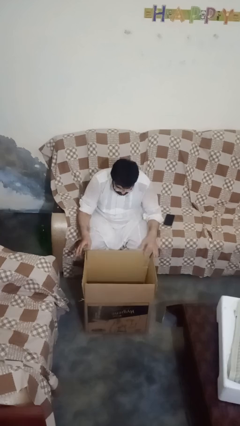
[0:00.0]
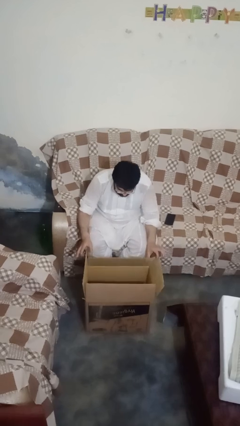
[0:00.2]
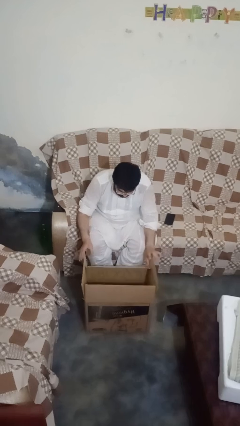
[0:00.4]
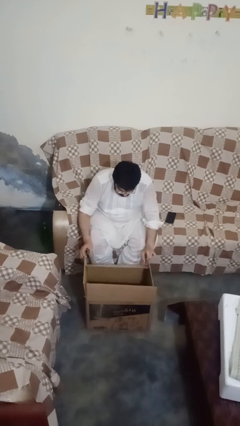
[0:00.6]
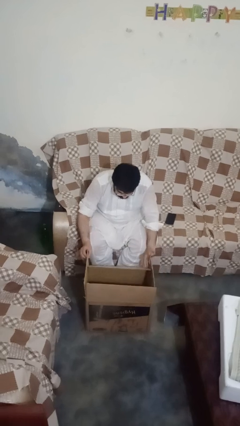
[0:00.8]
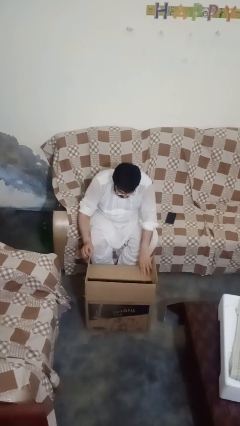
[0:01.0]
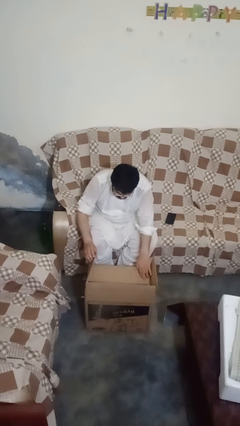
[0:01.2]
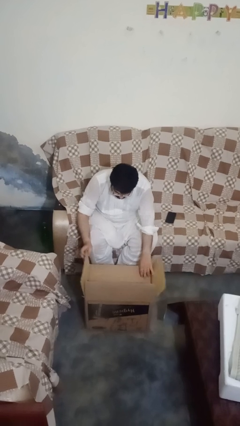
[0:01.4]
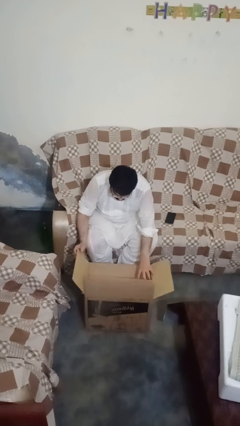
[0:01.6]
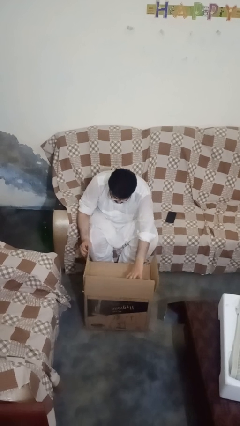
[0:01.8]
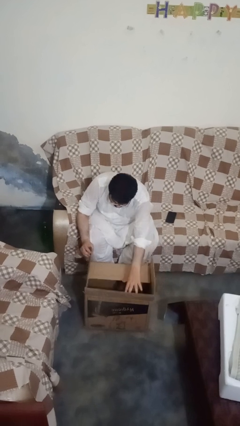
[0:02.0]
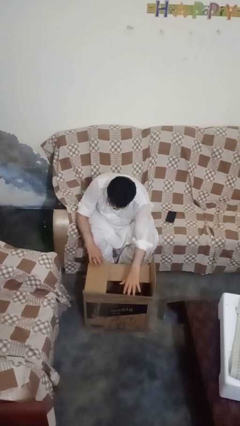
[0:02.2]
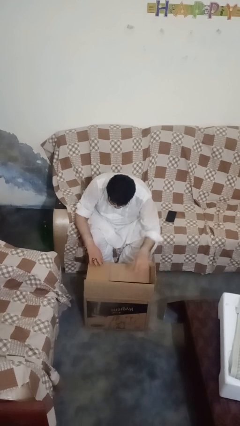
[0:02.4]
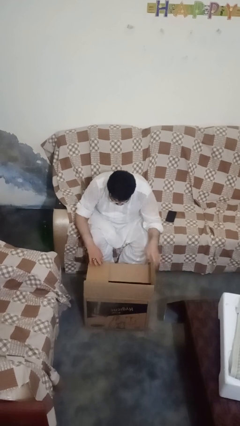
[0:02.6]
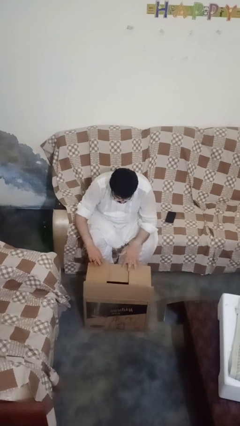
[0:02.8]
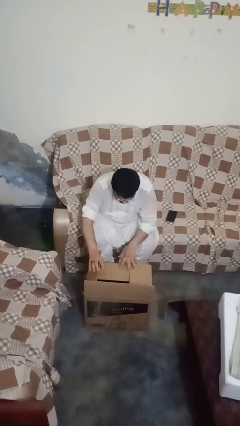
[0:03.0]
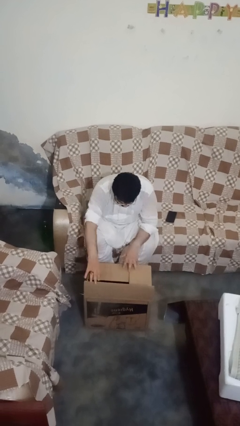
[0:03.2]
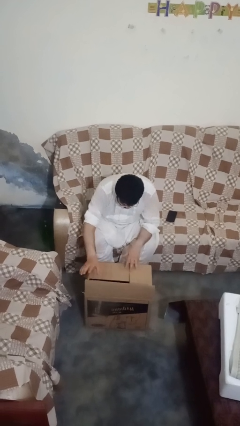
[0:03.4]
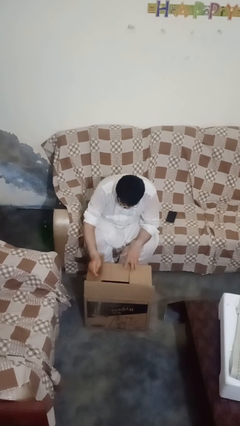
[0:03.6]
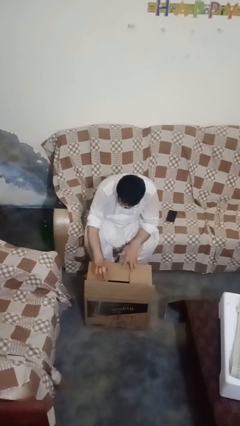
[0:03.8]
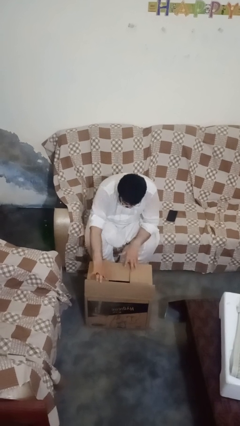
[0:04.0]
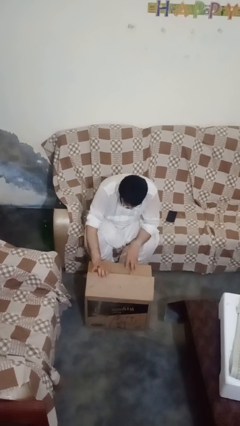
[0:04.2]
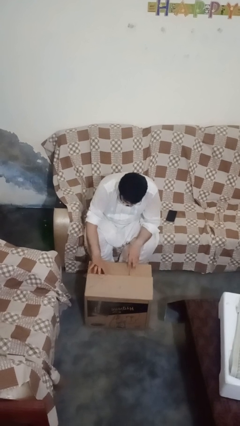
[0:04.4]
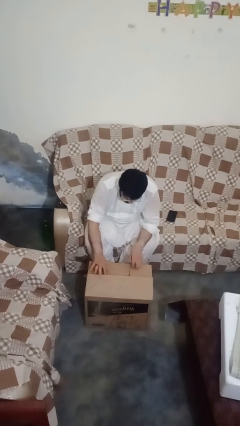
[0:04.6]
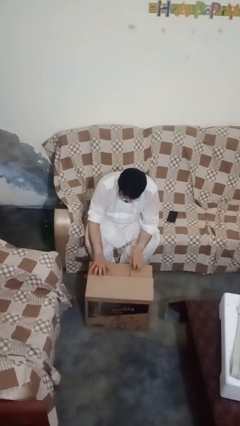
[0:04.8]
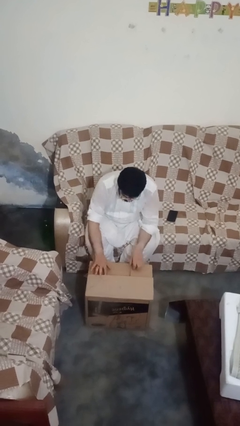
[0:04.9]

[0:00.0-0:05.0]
person closes box

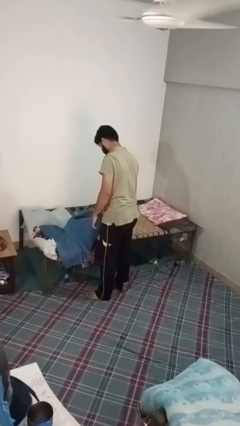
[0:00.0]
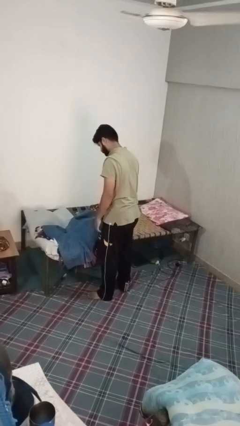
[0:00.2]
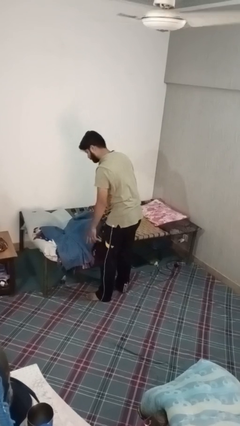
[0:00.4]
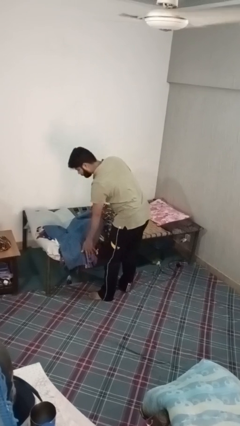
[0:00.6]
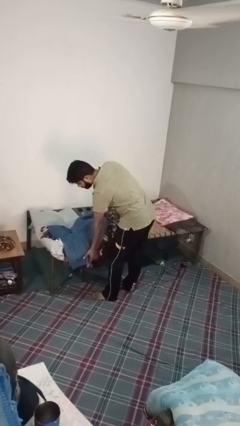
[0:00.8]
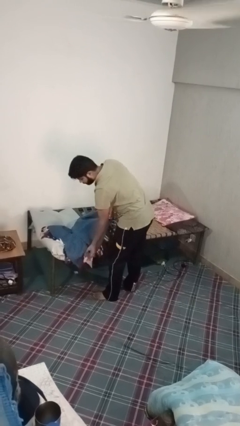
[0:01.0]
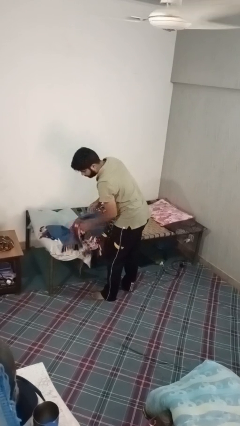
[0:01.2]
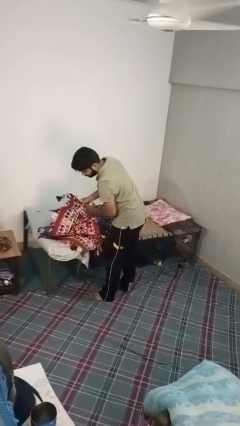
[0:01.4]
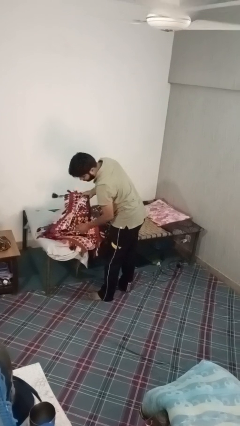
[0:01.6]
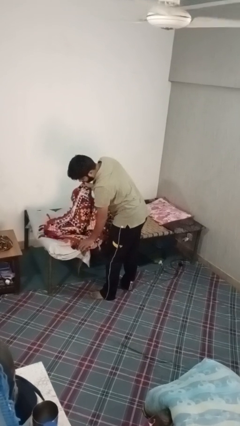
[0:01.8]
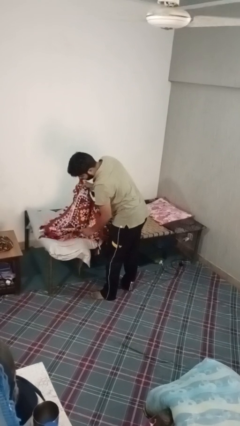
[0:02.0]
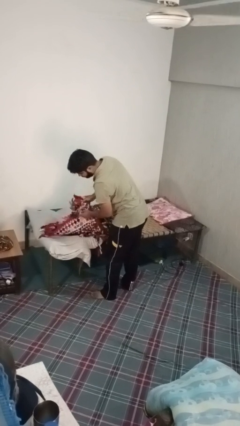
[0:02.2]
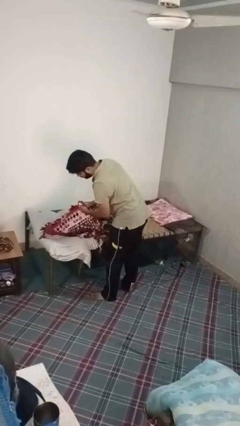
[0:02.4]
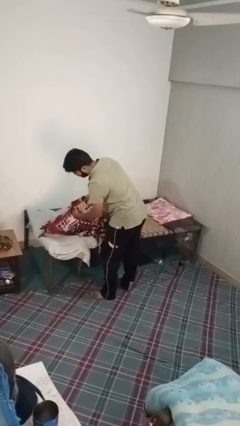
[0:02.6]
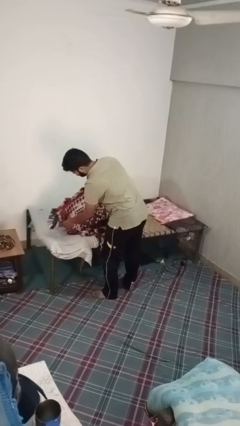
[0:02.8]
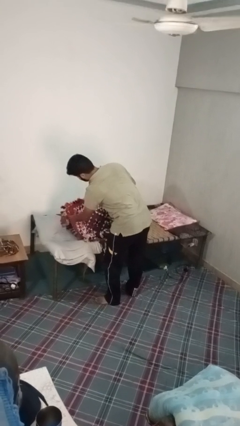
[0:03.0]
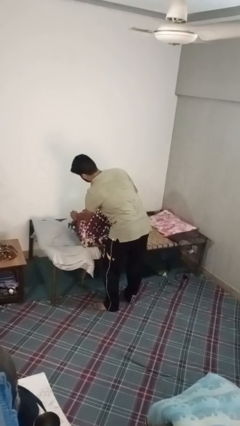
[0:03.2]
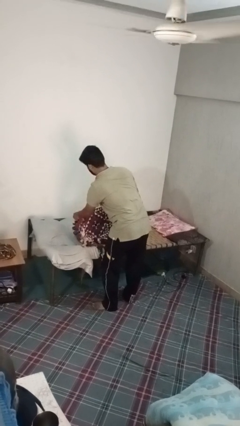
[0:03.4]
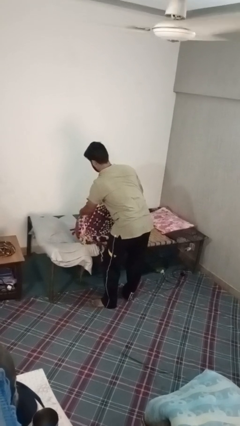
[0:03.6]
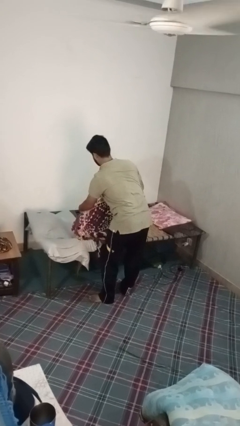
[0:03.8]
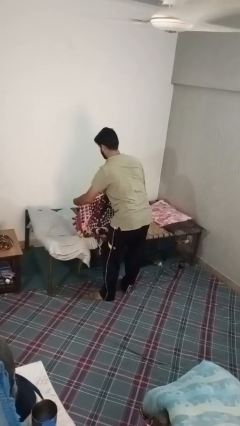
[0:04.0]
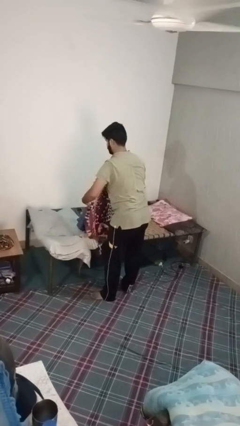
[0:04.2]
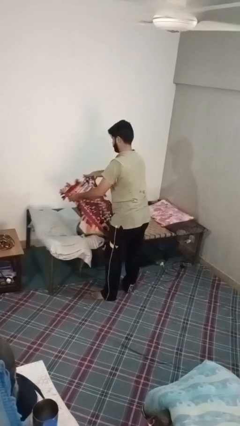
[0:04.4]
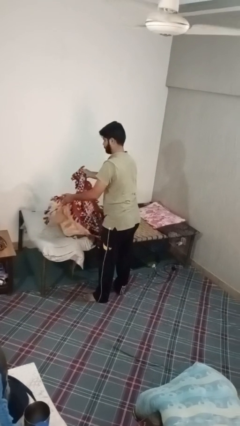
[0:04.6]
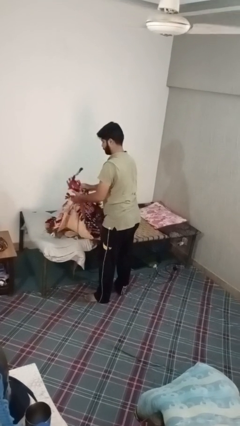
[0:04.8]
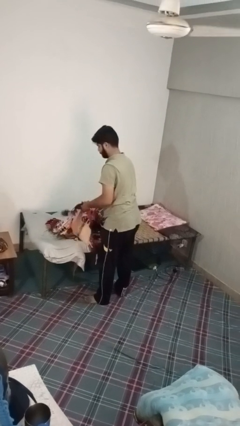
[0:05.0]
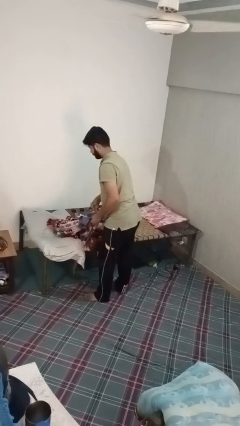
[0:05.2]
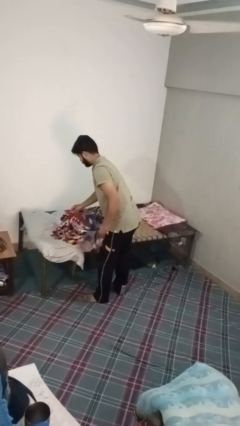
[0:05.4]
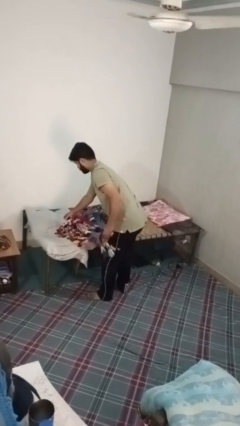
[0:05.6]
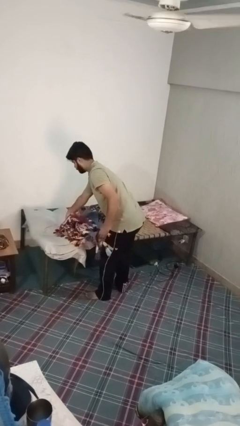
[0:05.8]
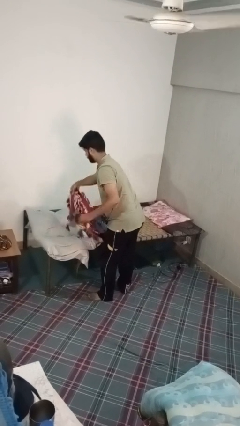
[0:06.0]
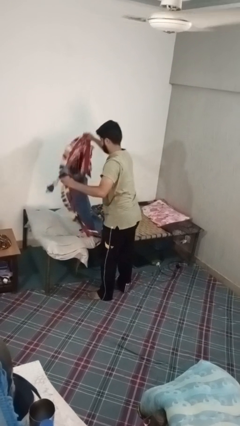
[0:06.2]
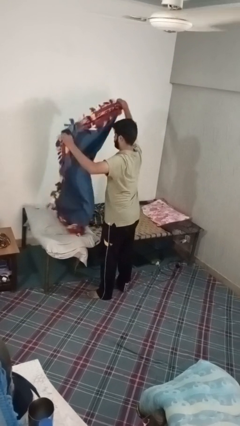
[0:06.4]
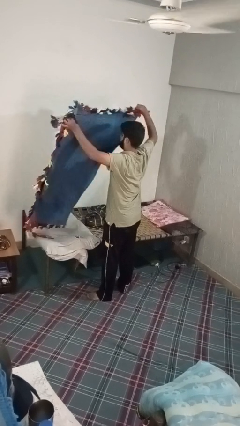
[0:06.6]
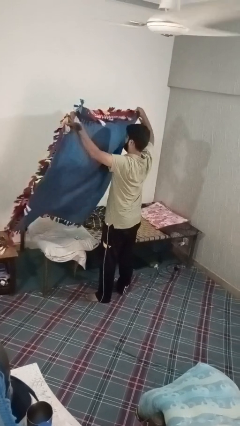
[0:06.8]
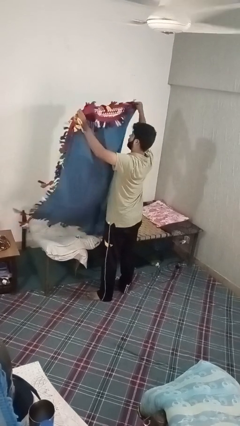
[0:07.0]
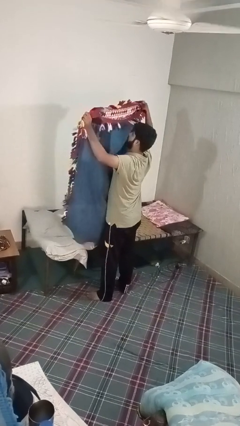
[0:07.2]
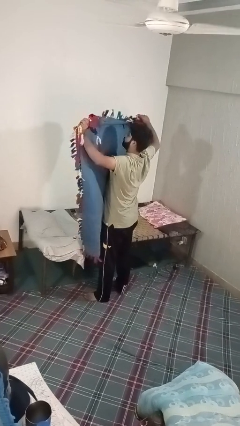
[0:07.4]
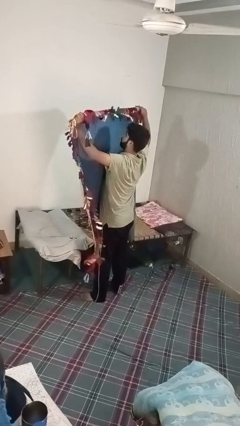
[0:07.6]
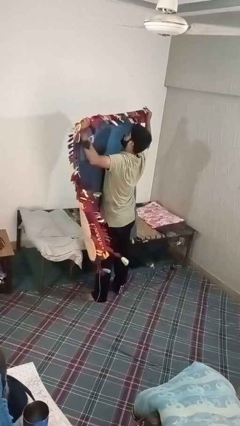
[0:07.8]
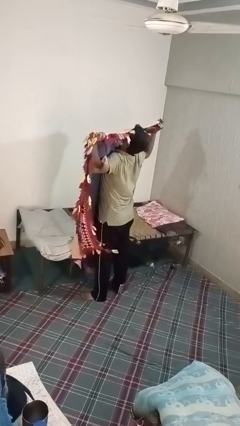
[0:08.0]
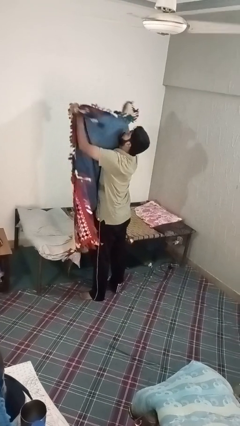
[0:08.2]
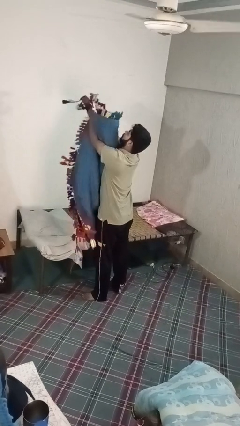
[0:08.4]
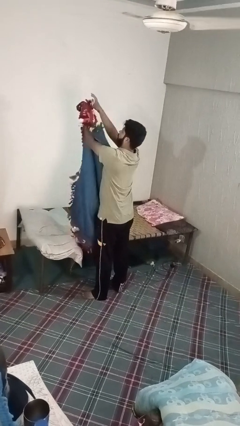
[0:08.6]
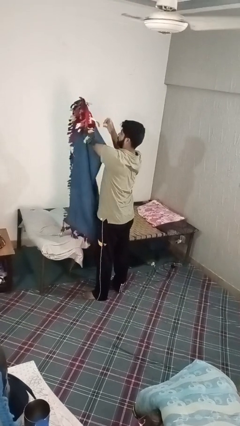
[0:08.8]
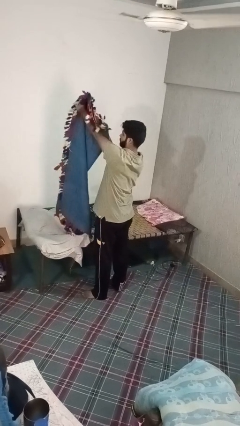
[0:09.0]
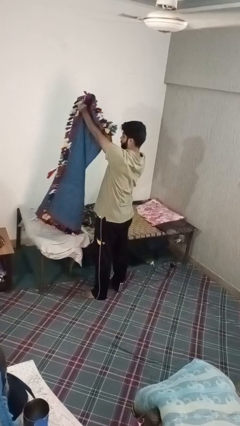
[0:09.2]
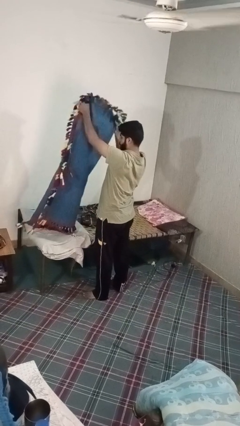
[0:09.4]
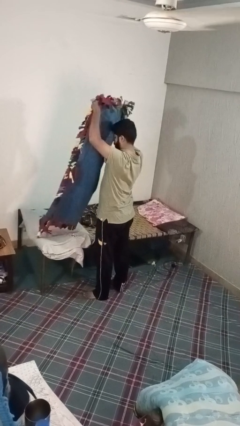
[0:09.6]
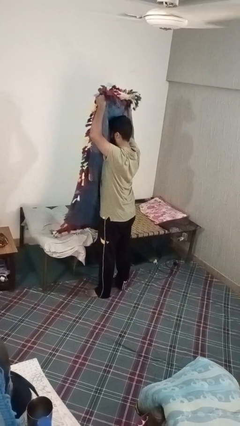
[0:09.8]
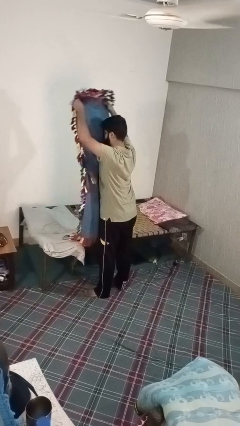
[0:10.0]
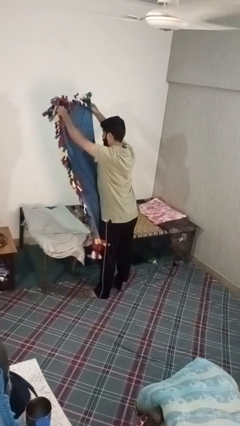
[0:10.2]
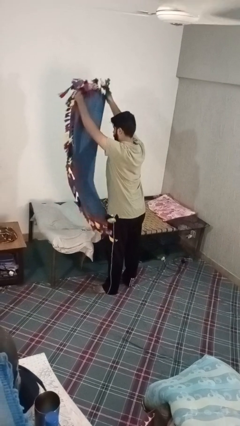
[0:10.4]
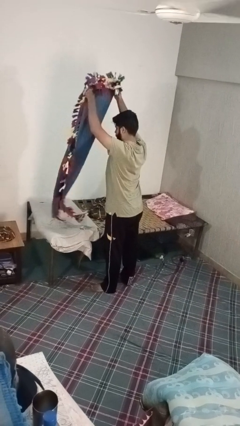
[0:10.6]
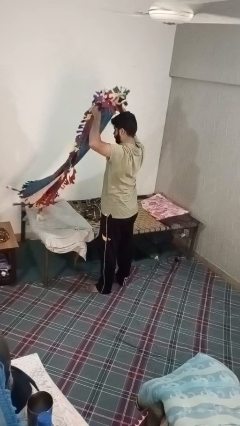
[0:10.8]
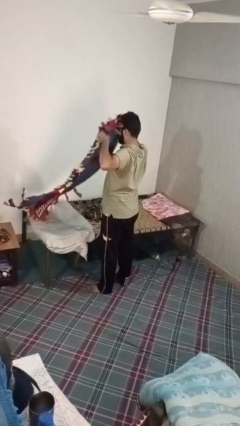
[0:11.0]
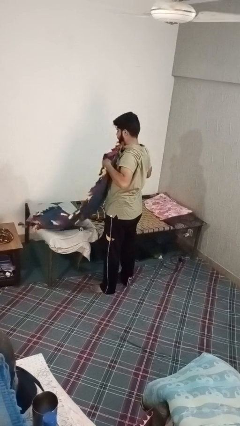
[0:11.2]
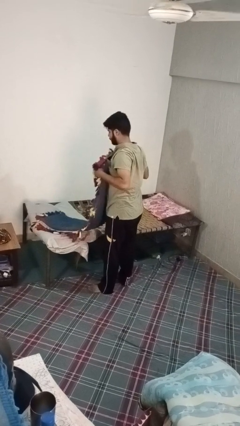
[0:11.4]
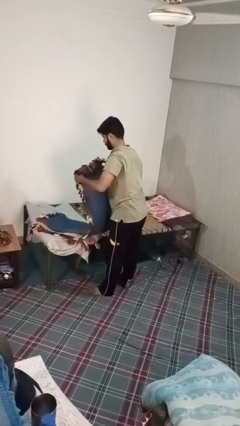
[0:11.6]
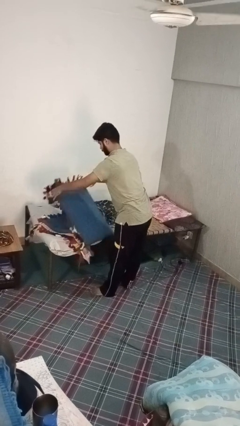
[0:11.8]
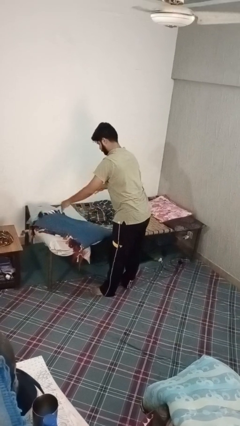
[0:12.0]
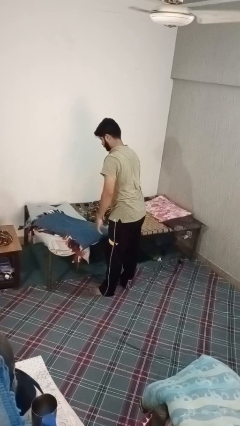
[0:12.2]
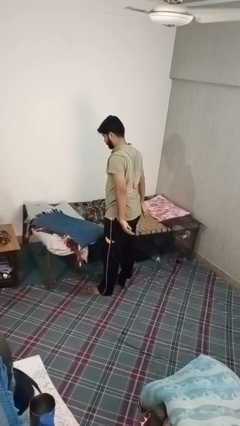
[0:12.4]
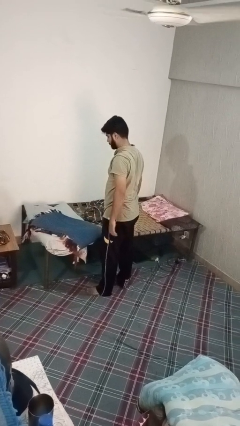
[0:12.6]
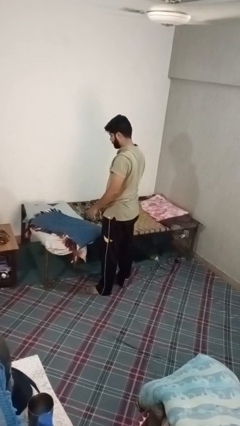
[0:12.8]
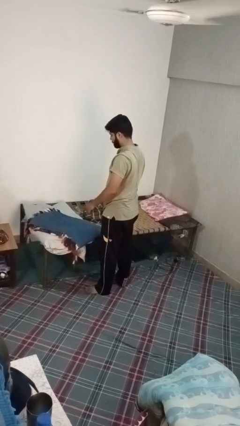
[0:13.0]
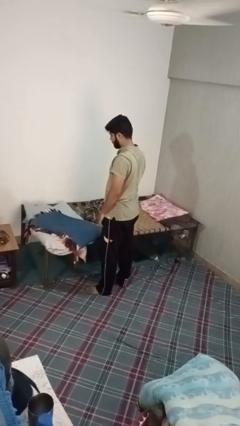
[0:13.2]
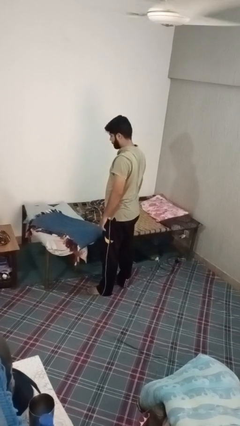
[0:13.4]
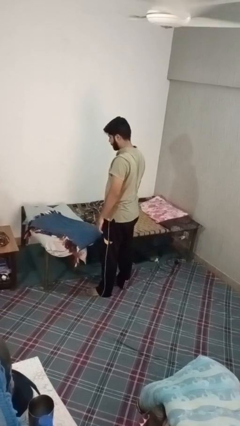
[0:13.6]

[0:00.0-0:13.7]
person folds blanket

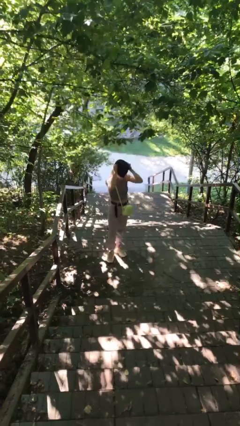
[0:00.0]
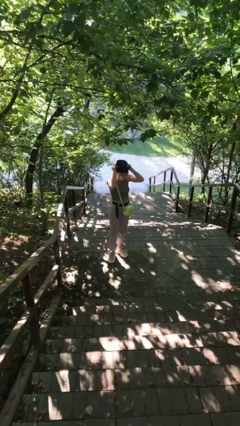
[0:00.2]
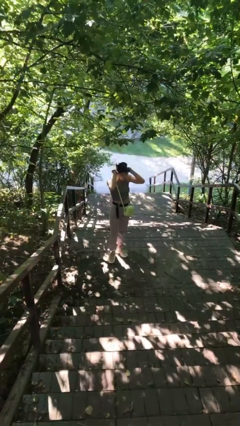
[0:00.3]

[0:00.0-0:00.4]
person puts on hat
